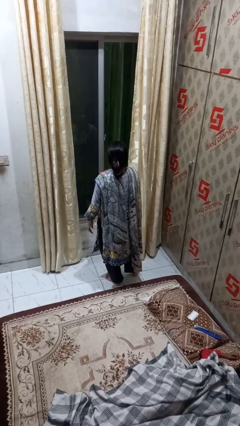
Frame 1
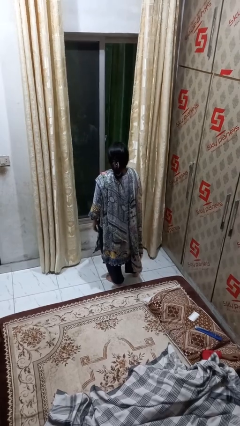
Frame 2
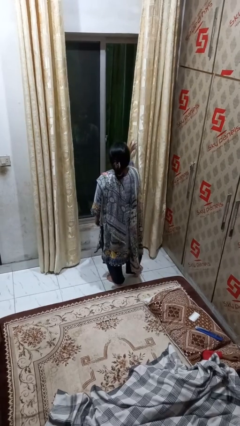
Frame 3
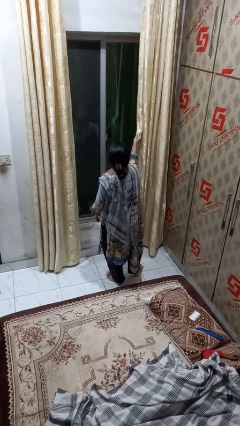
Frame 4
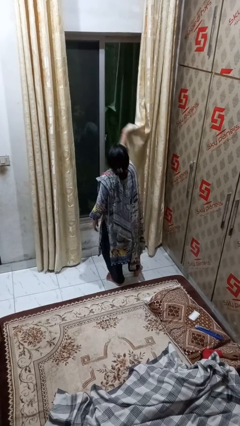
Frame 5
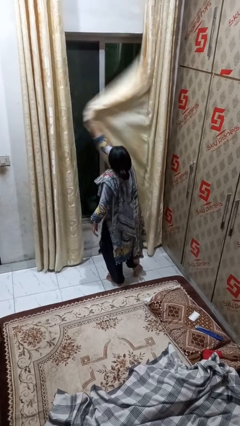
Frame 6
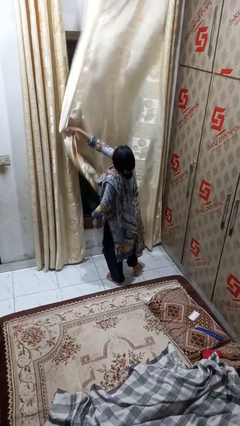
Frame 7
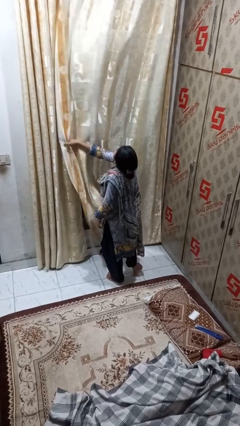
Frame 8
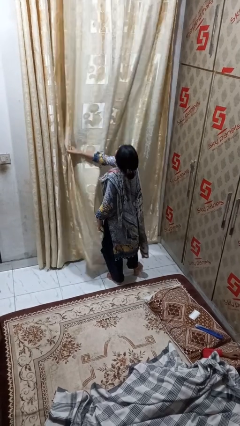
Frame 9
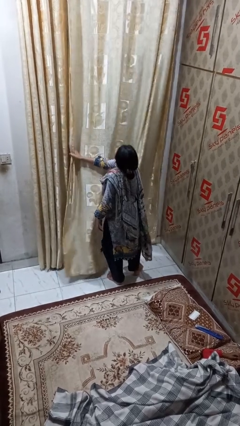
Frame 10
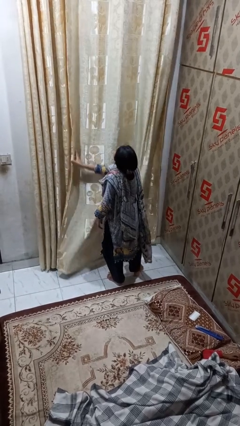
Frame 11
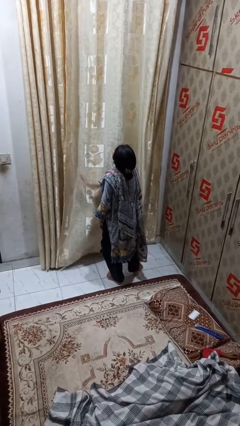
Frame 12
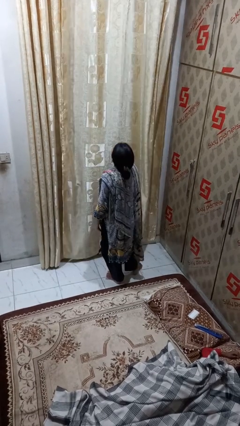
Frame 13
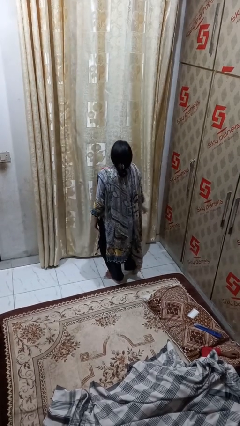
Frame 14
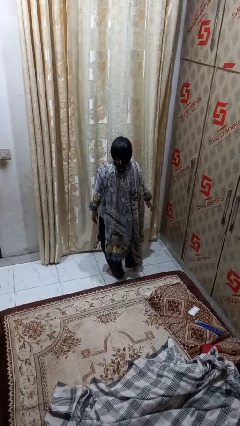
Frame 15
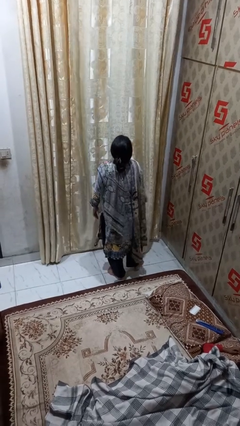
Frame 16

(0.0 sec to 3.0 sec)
person closes curtains

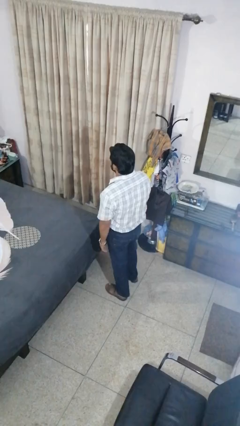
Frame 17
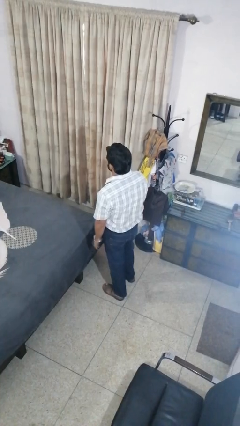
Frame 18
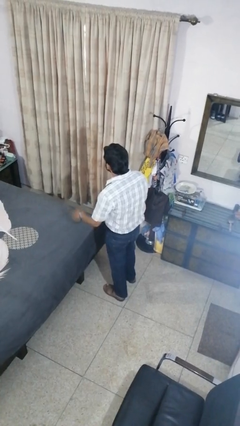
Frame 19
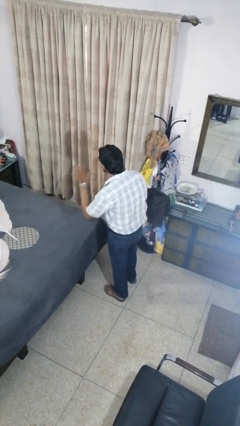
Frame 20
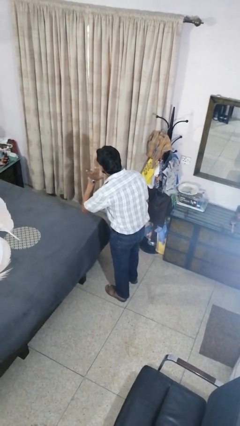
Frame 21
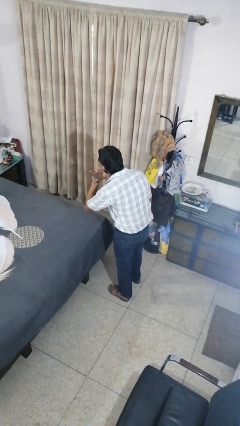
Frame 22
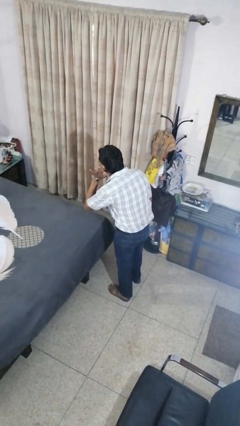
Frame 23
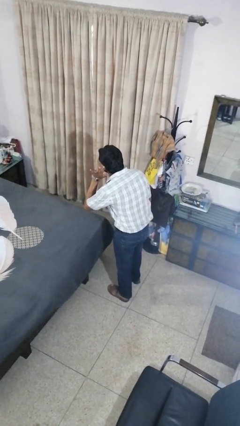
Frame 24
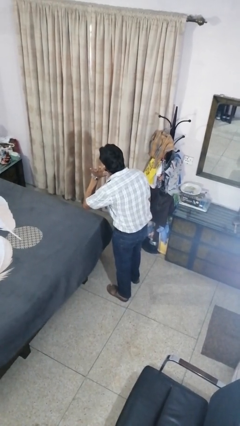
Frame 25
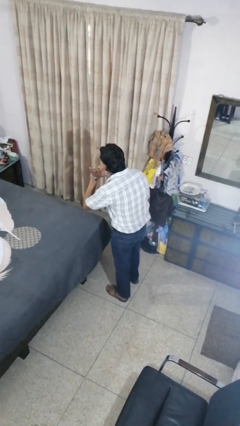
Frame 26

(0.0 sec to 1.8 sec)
person gestures listen closely

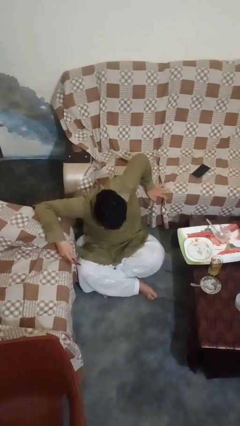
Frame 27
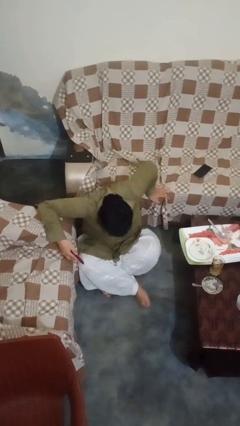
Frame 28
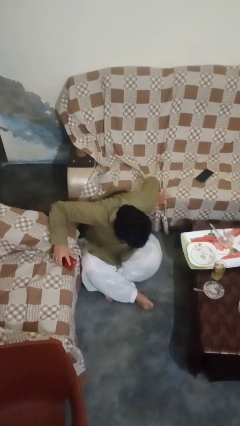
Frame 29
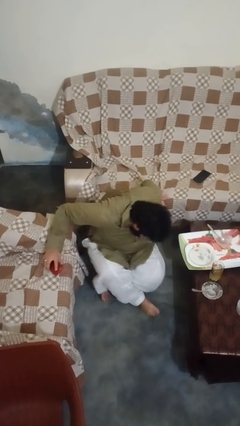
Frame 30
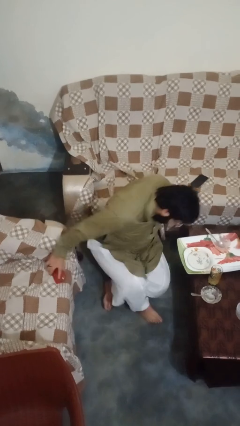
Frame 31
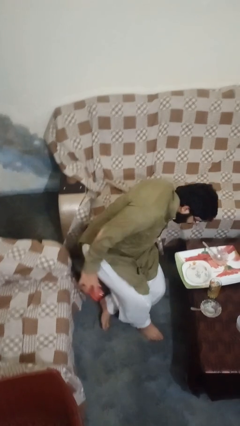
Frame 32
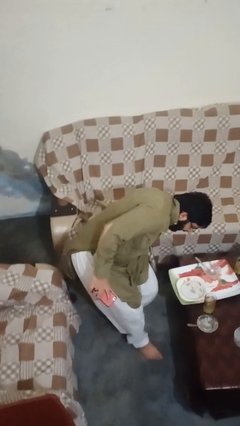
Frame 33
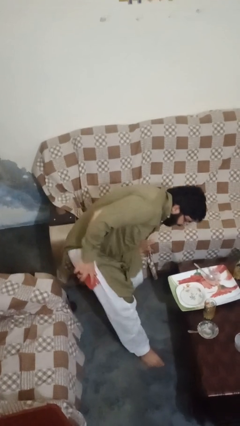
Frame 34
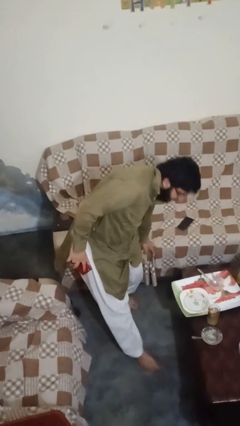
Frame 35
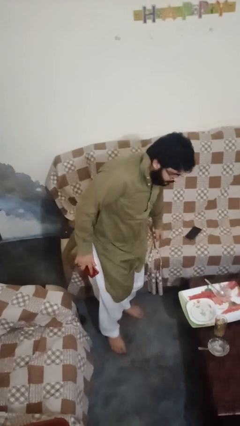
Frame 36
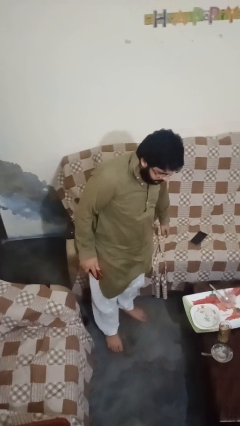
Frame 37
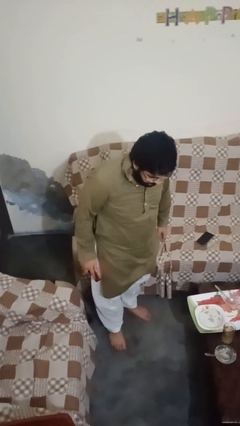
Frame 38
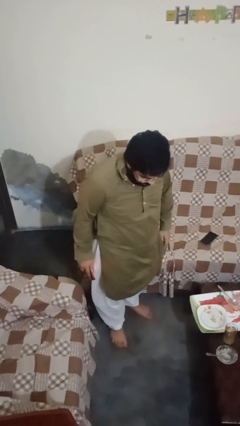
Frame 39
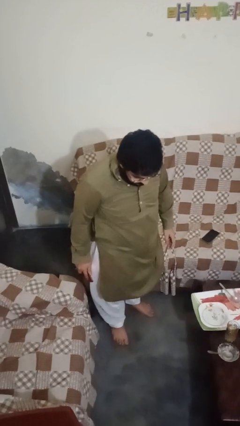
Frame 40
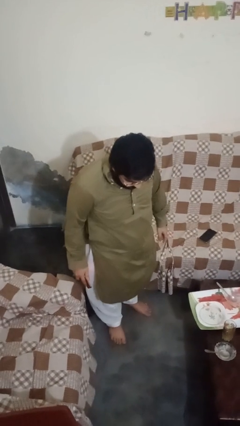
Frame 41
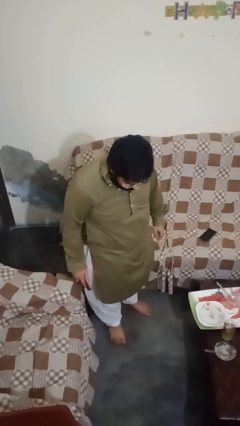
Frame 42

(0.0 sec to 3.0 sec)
person stands up from floor

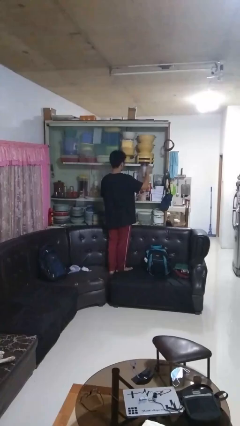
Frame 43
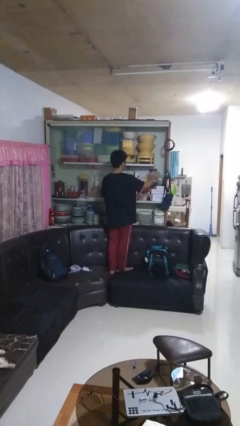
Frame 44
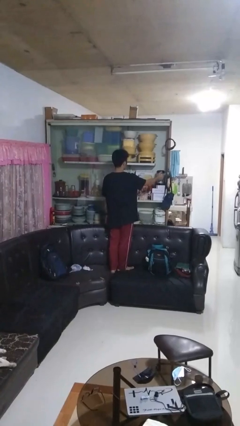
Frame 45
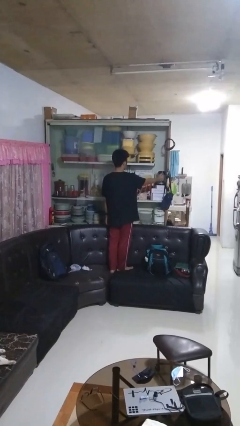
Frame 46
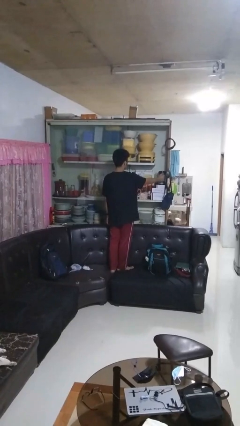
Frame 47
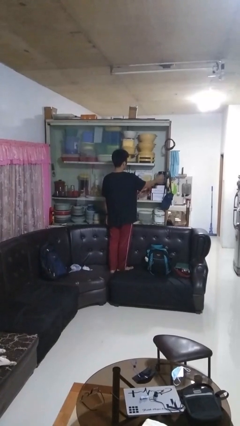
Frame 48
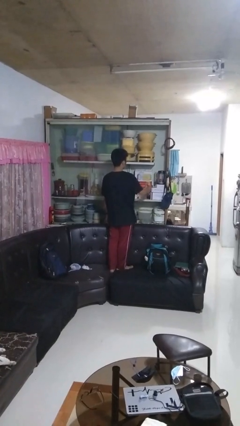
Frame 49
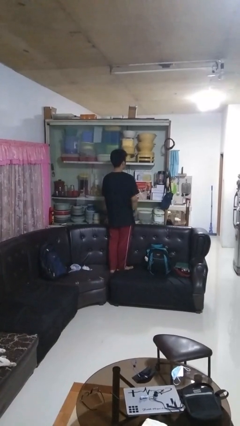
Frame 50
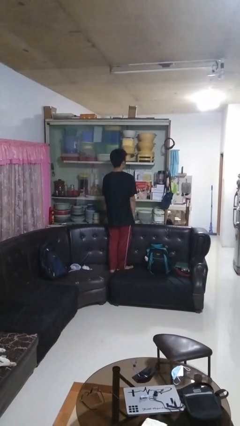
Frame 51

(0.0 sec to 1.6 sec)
person puts down object into cabinet

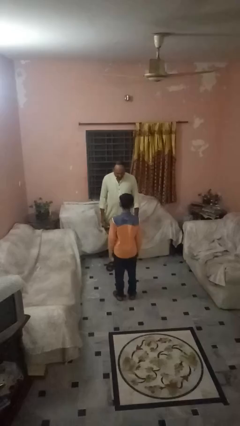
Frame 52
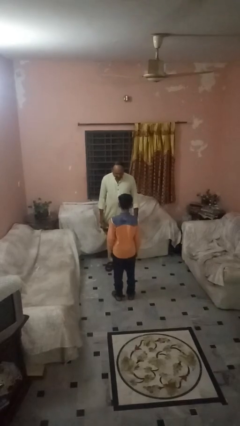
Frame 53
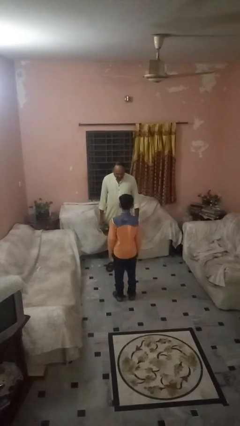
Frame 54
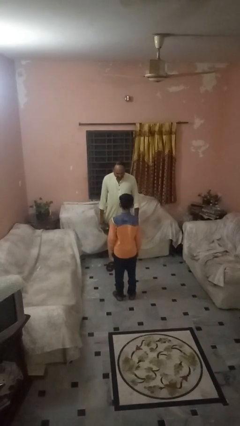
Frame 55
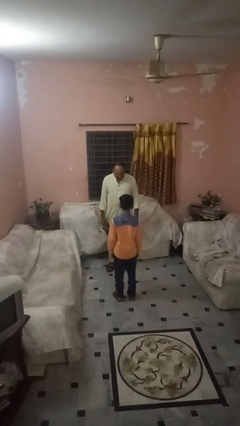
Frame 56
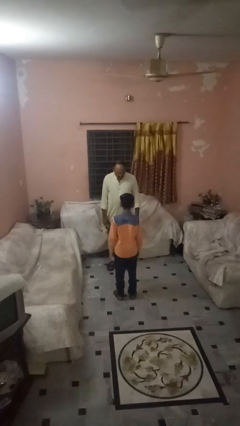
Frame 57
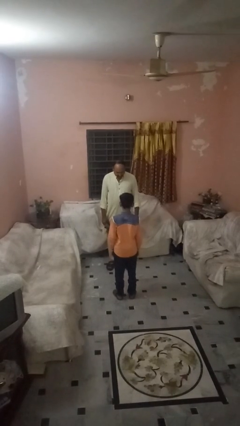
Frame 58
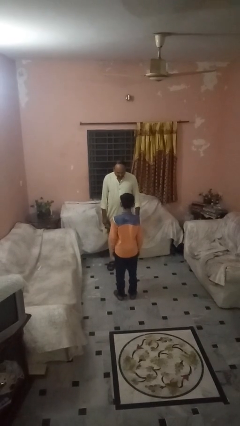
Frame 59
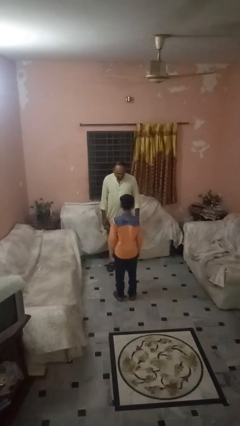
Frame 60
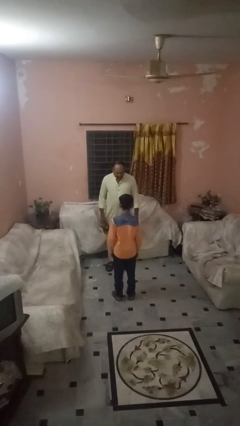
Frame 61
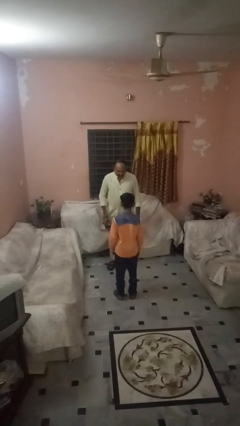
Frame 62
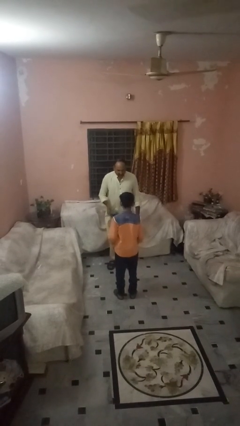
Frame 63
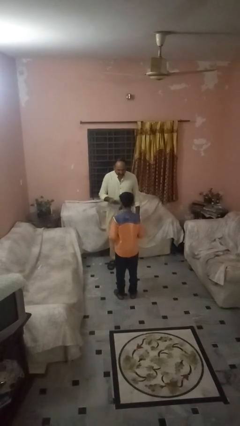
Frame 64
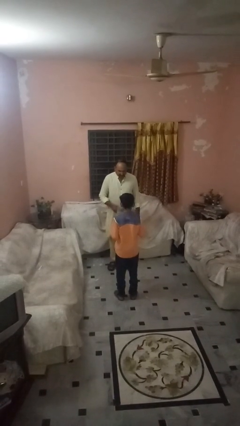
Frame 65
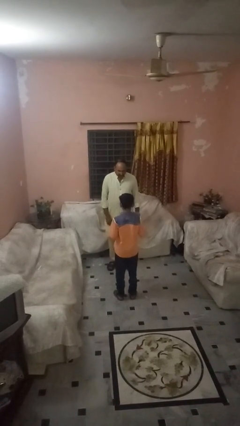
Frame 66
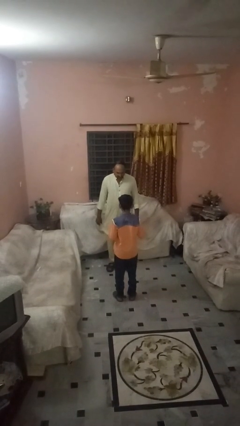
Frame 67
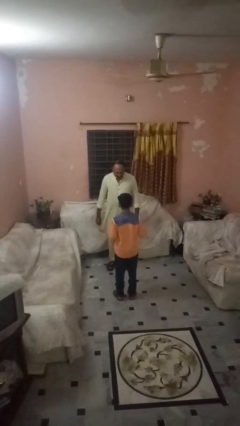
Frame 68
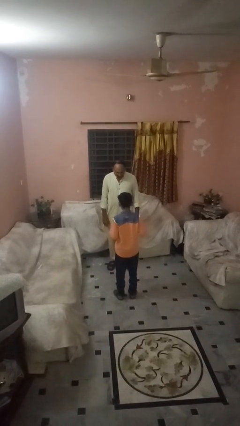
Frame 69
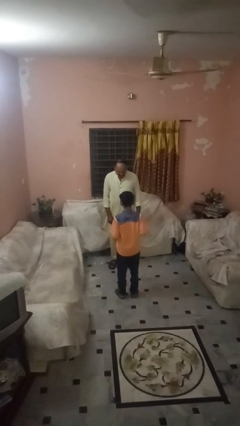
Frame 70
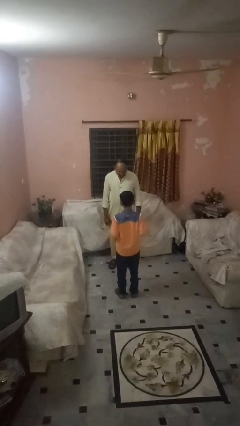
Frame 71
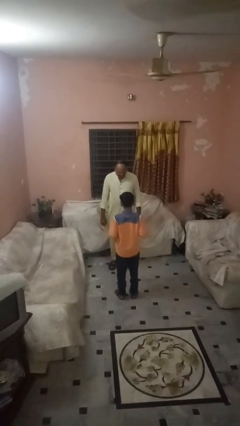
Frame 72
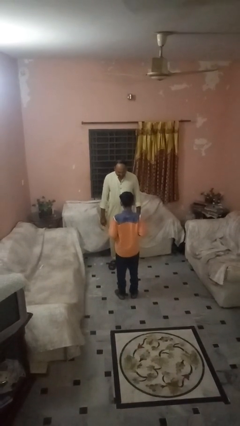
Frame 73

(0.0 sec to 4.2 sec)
person throws object to person

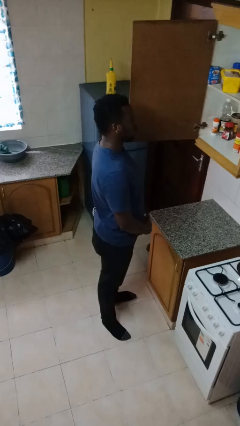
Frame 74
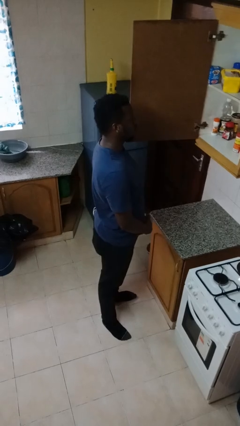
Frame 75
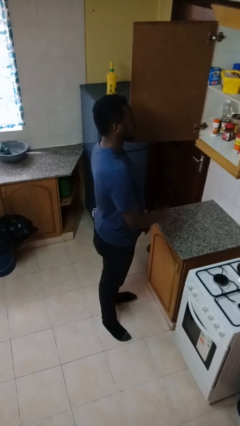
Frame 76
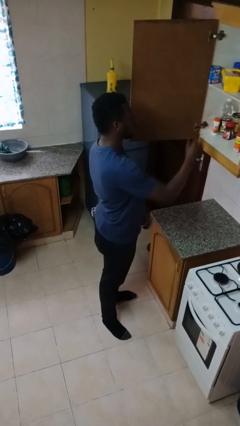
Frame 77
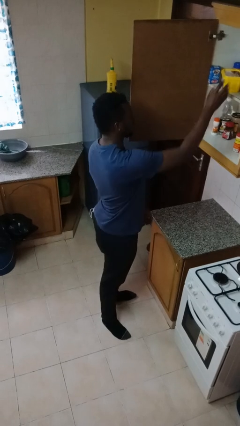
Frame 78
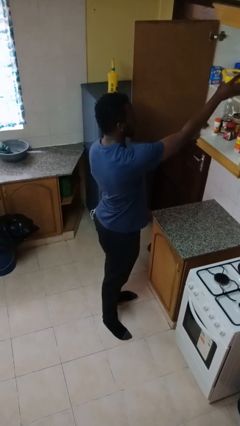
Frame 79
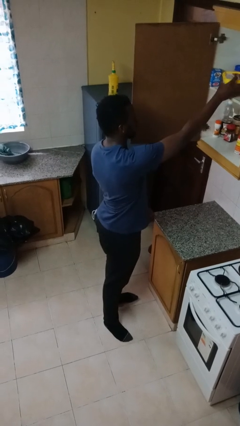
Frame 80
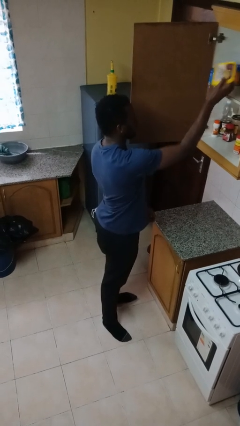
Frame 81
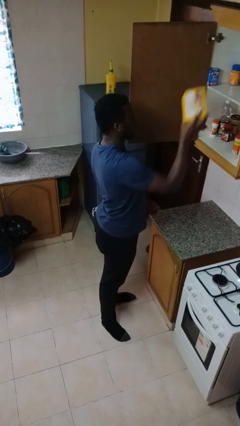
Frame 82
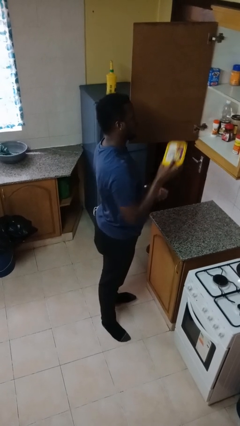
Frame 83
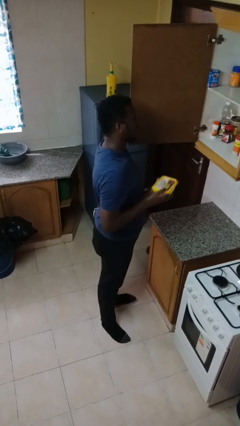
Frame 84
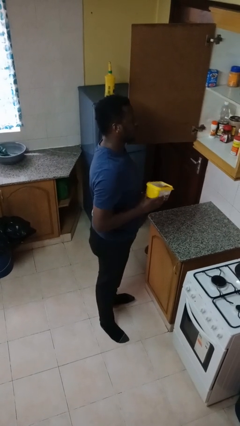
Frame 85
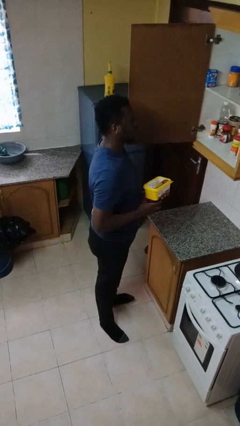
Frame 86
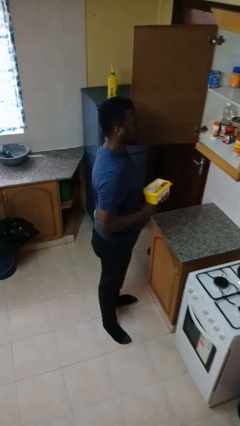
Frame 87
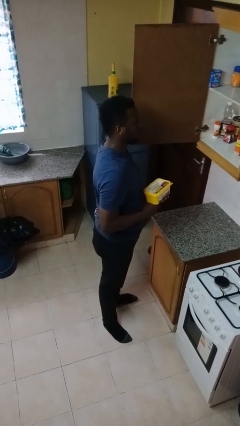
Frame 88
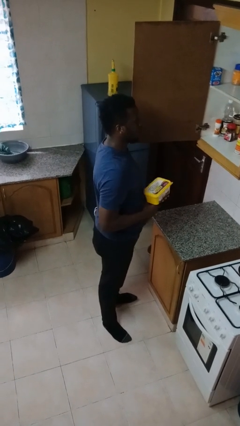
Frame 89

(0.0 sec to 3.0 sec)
person picks up object from shelf

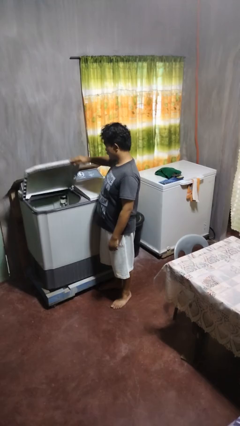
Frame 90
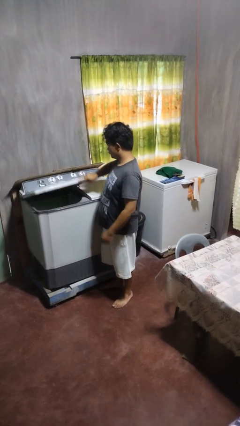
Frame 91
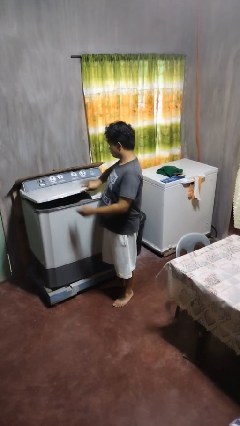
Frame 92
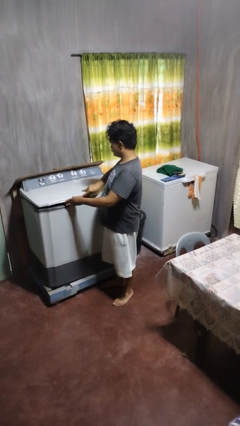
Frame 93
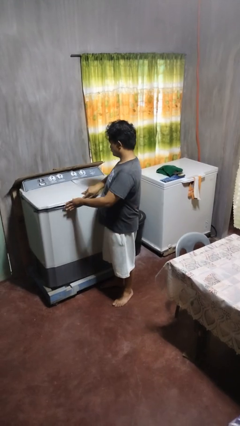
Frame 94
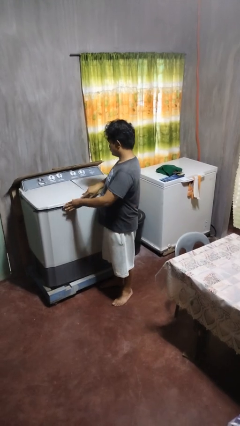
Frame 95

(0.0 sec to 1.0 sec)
person closes clothes washer
